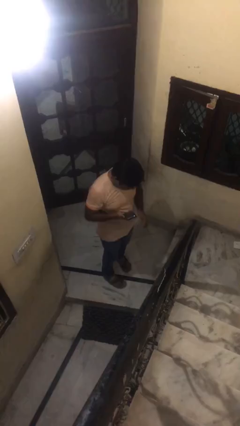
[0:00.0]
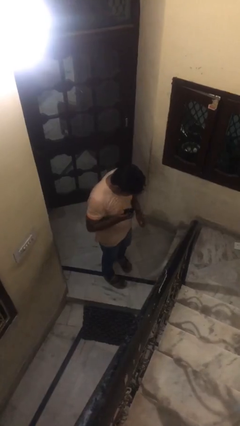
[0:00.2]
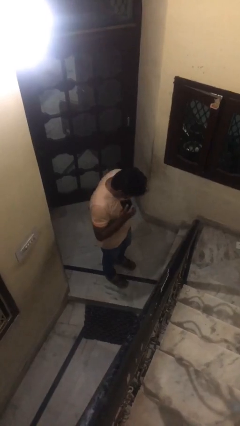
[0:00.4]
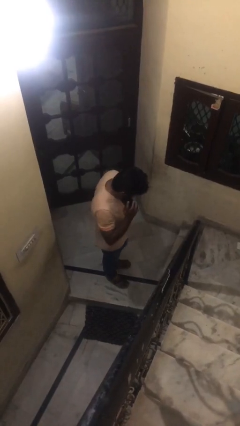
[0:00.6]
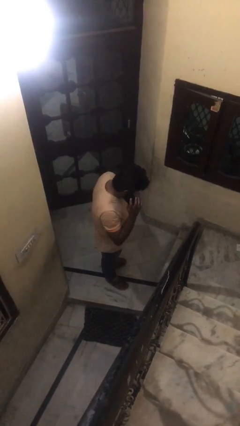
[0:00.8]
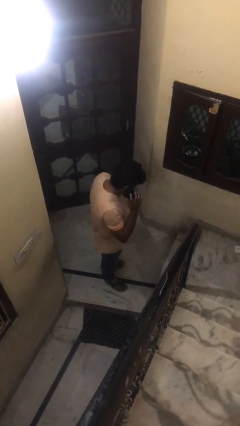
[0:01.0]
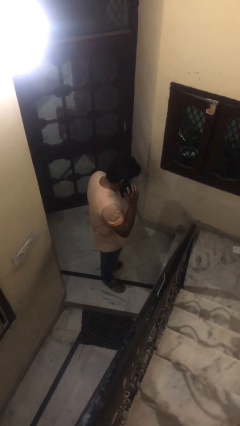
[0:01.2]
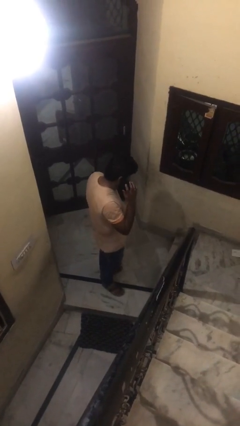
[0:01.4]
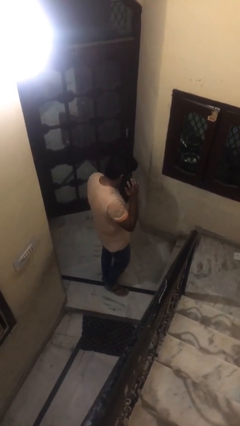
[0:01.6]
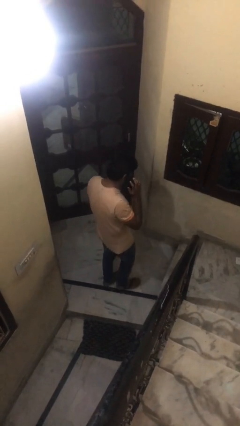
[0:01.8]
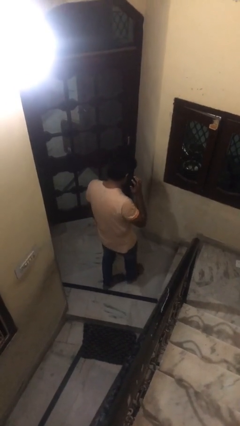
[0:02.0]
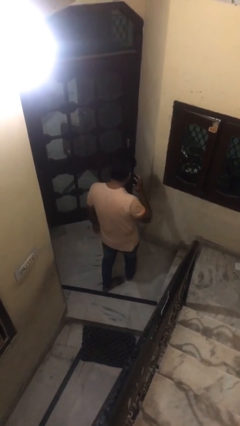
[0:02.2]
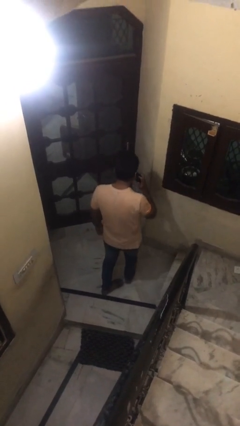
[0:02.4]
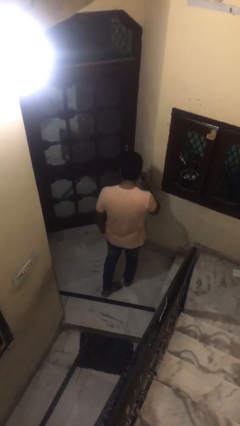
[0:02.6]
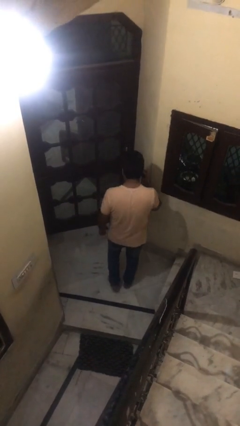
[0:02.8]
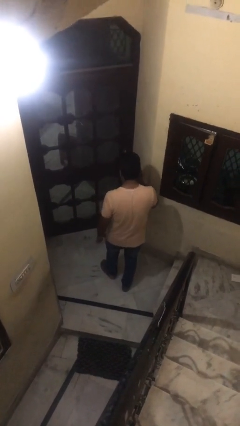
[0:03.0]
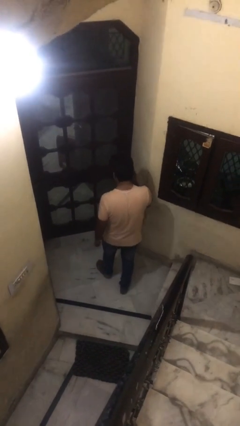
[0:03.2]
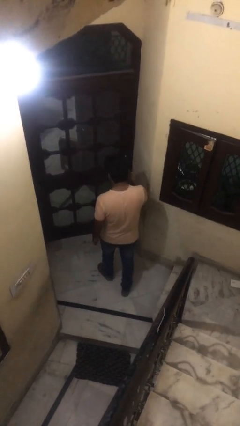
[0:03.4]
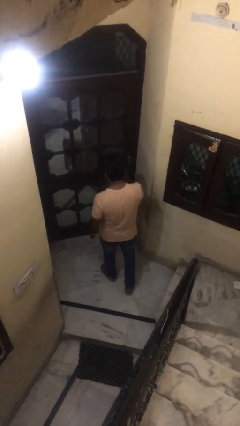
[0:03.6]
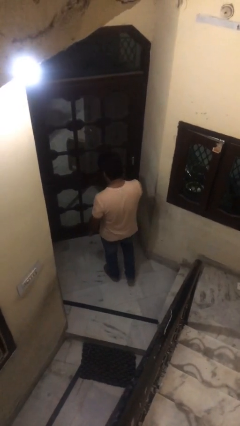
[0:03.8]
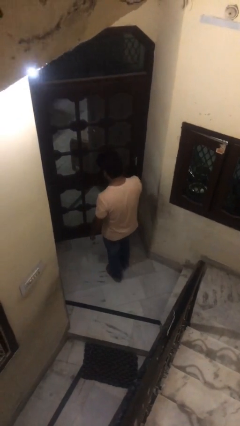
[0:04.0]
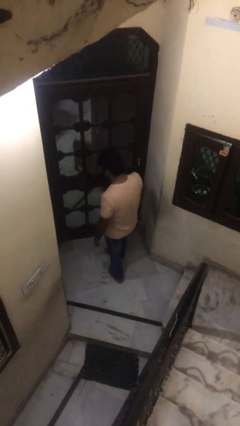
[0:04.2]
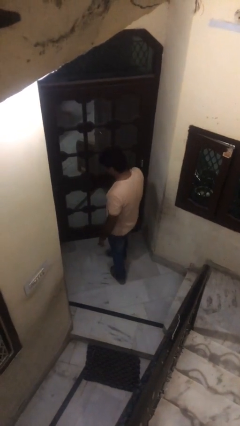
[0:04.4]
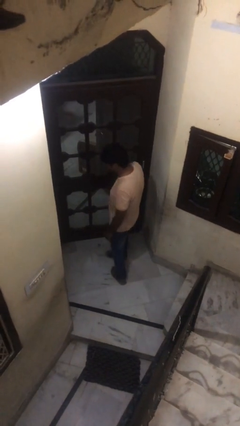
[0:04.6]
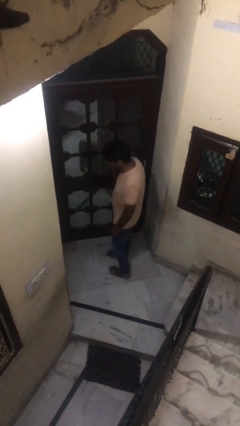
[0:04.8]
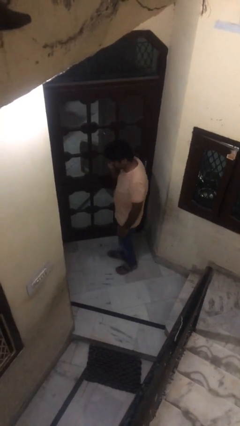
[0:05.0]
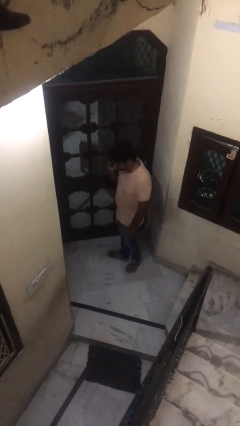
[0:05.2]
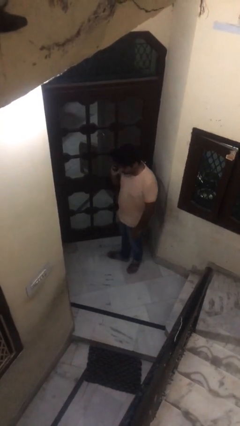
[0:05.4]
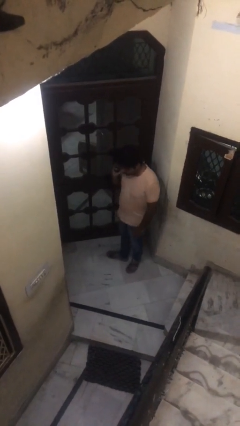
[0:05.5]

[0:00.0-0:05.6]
person talks on phone

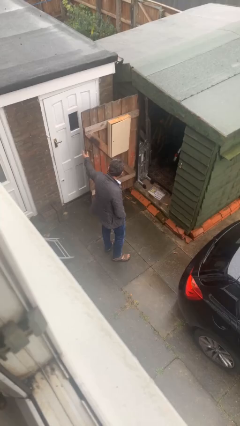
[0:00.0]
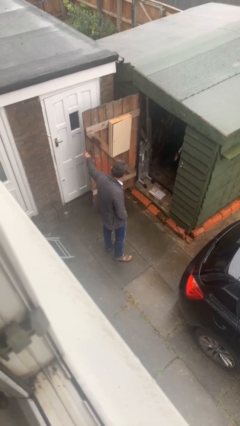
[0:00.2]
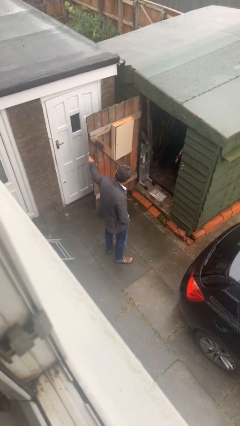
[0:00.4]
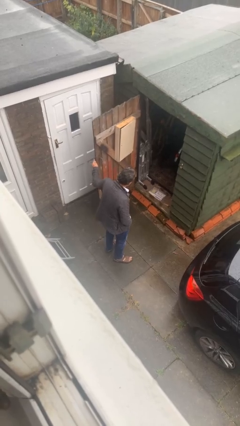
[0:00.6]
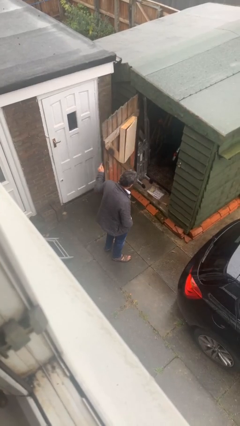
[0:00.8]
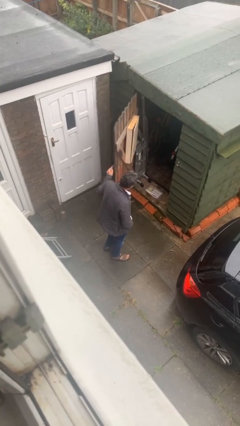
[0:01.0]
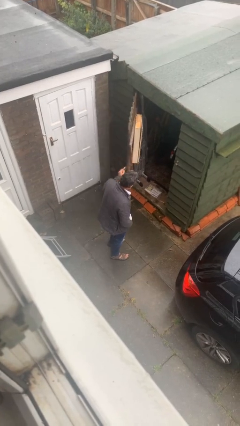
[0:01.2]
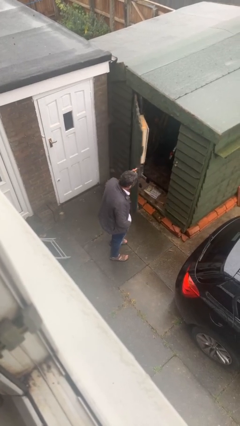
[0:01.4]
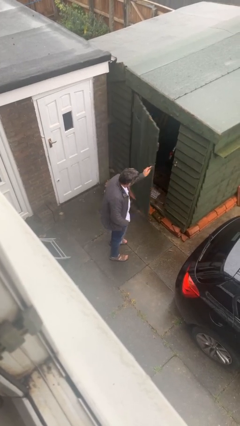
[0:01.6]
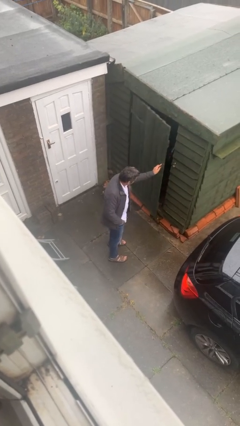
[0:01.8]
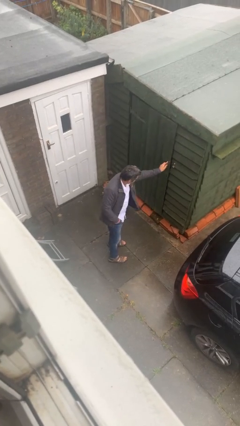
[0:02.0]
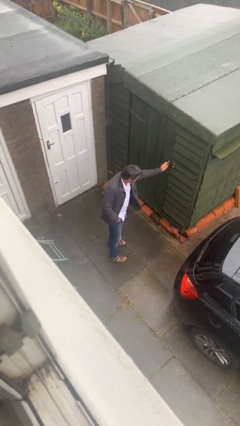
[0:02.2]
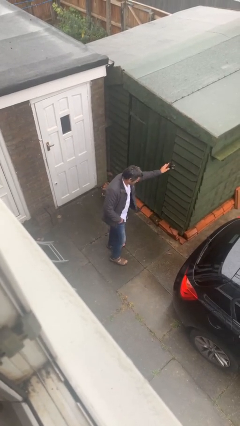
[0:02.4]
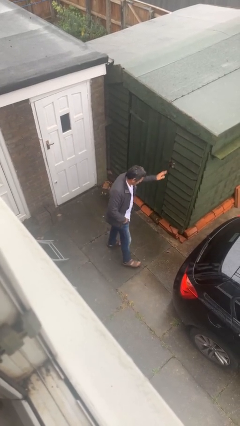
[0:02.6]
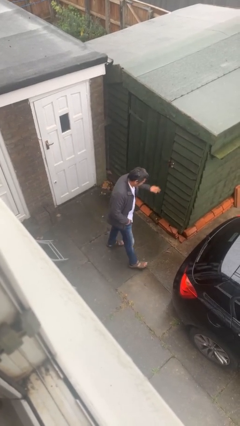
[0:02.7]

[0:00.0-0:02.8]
person closes facility door

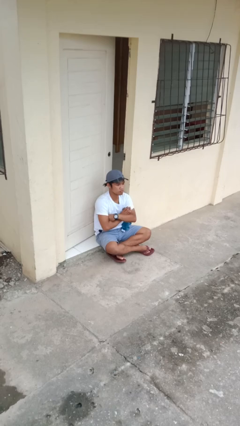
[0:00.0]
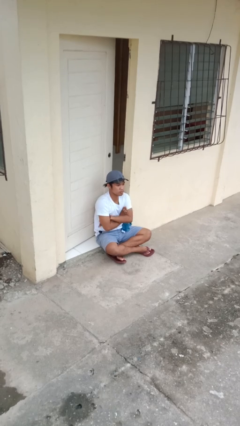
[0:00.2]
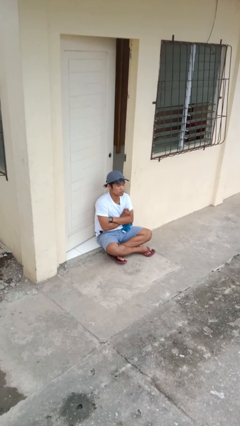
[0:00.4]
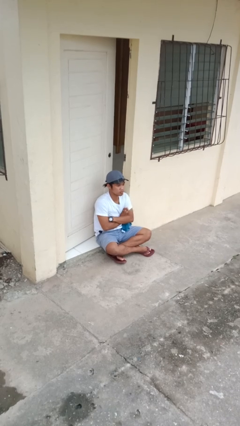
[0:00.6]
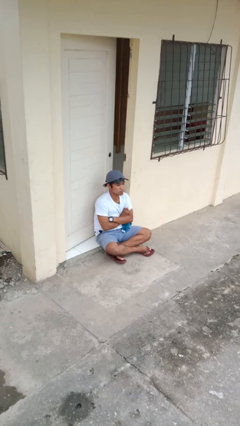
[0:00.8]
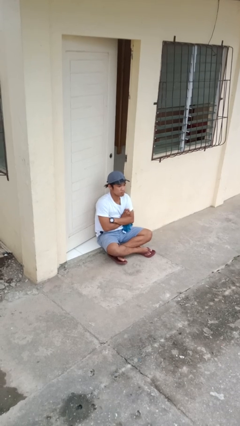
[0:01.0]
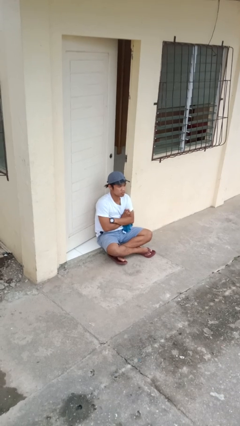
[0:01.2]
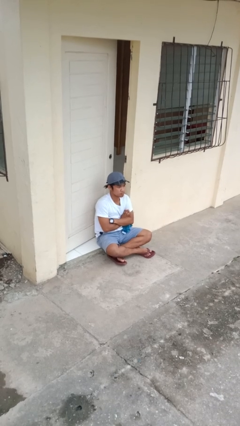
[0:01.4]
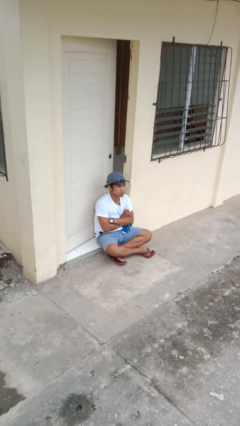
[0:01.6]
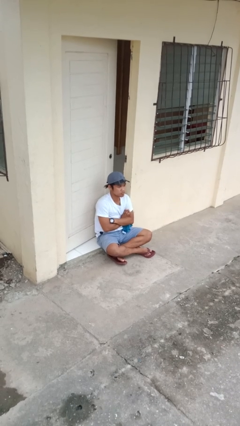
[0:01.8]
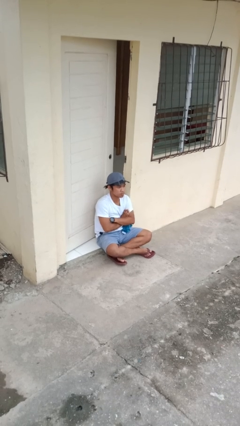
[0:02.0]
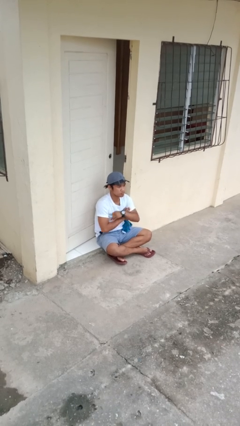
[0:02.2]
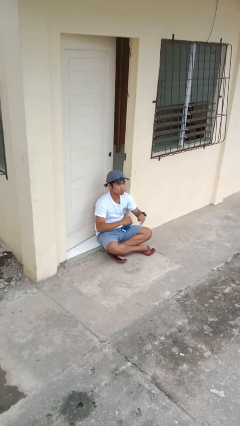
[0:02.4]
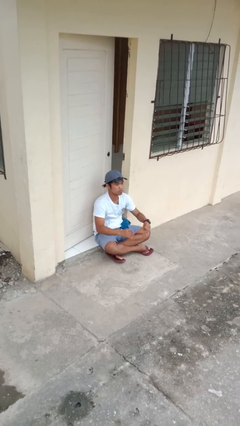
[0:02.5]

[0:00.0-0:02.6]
person crosses arms

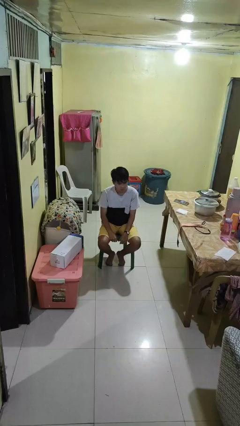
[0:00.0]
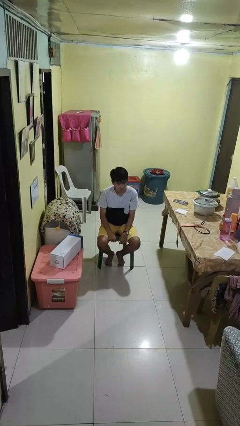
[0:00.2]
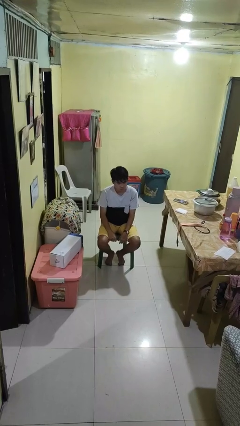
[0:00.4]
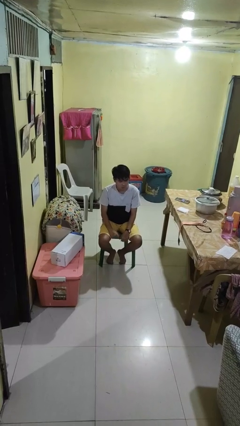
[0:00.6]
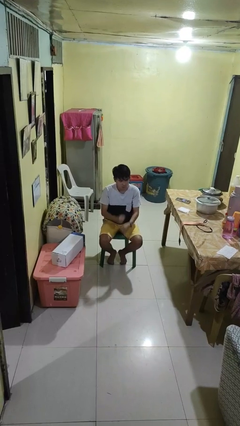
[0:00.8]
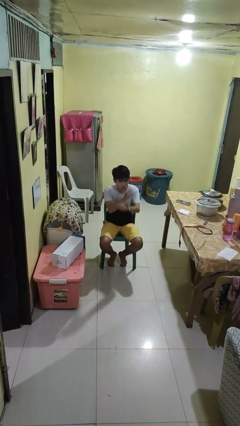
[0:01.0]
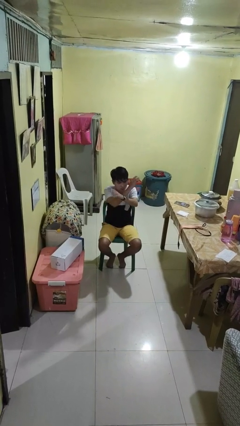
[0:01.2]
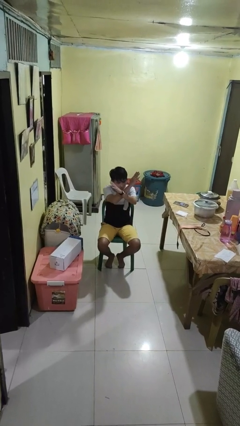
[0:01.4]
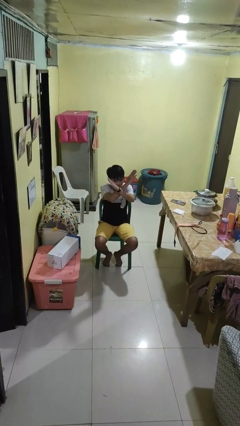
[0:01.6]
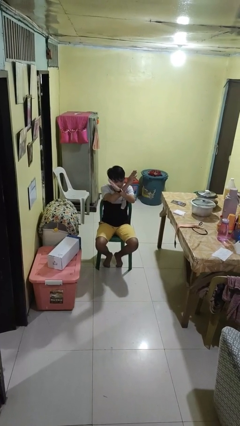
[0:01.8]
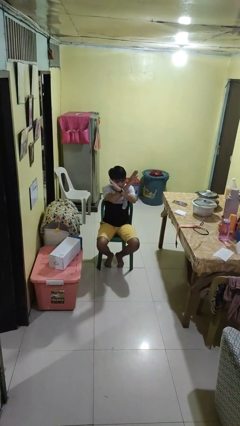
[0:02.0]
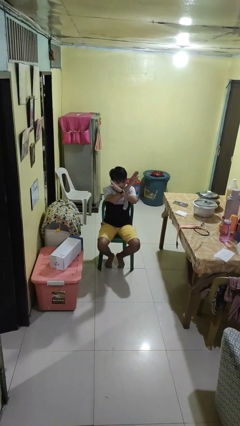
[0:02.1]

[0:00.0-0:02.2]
person gestures arms x

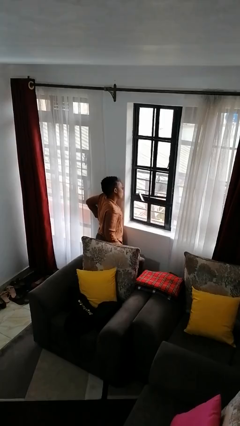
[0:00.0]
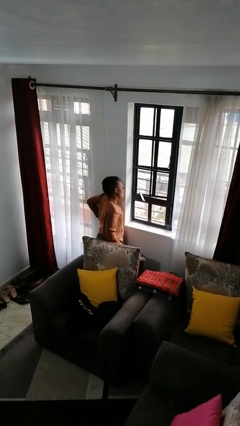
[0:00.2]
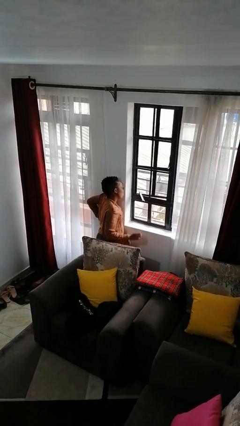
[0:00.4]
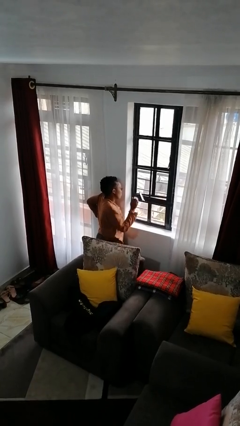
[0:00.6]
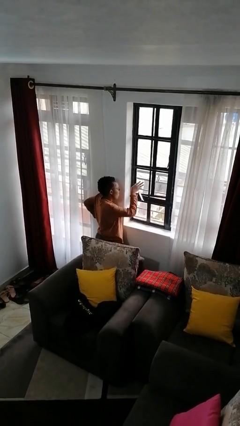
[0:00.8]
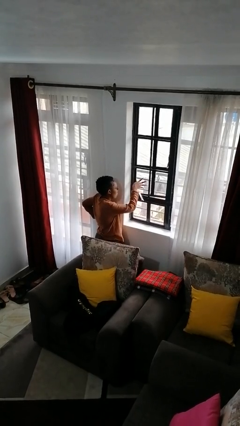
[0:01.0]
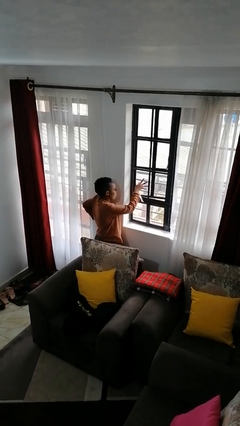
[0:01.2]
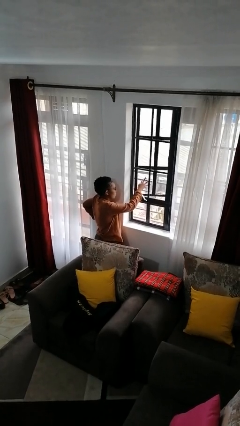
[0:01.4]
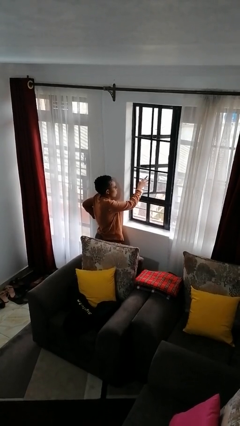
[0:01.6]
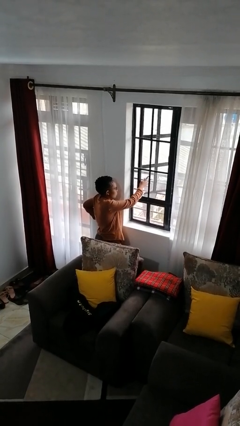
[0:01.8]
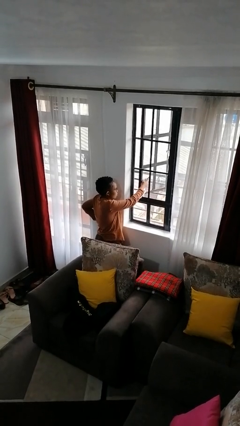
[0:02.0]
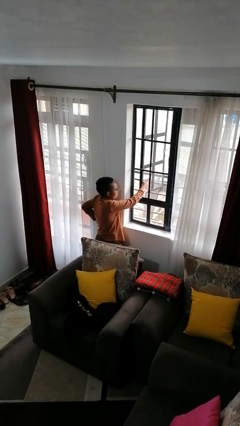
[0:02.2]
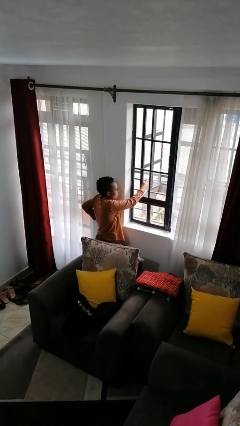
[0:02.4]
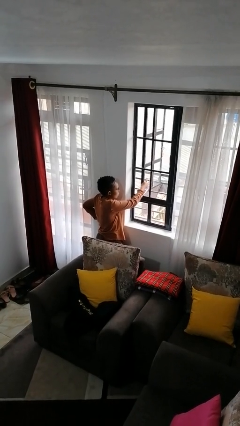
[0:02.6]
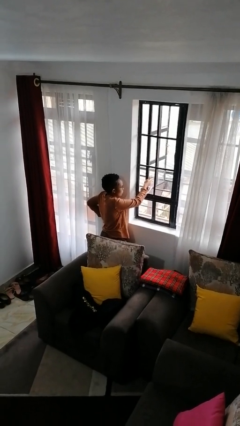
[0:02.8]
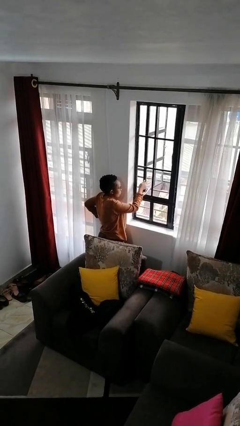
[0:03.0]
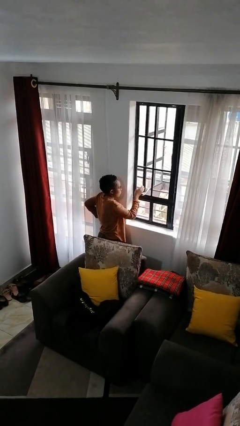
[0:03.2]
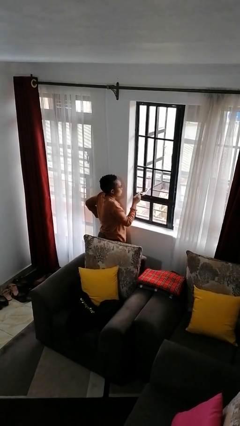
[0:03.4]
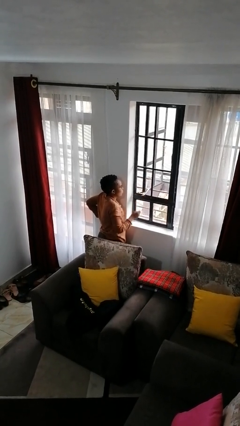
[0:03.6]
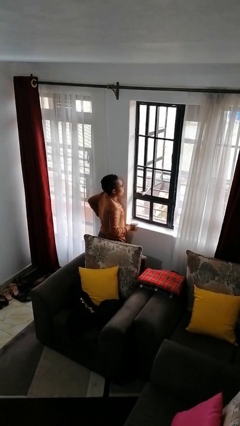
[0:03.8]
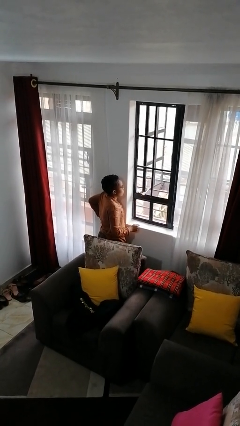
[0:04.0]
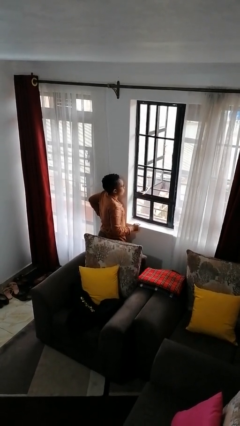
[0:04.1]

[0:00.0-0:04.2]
person opens home window

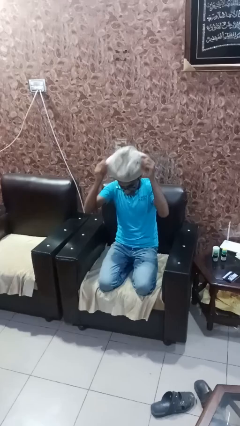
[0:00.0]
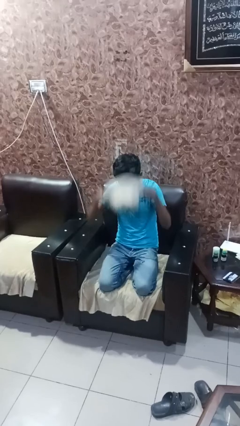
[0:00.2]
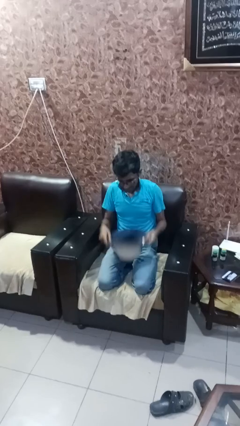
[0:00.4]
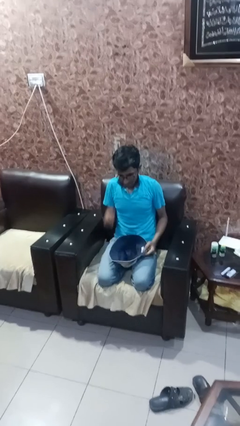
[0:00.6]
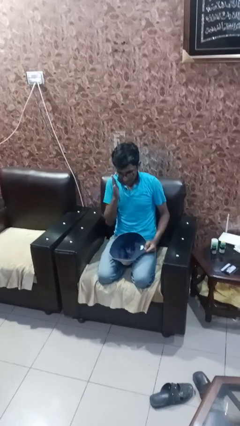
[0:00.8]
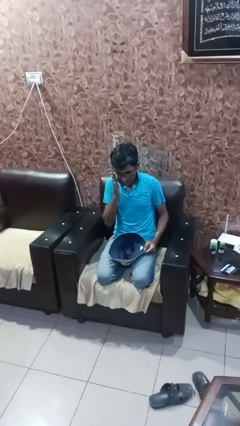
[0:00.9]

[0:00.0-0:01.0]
person takes off hat
